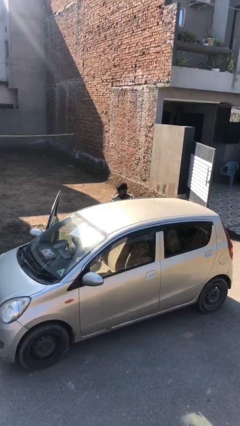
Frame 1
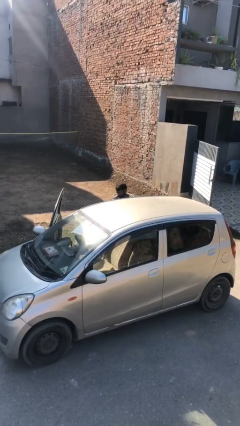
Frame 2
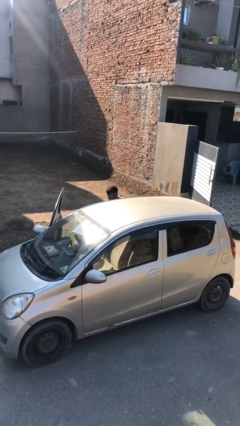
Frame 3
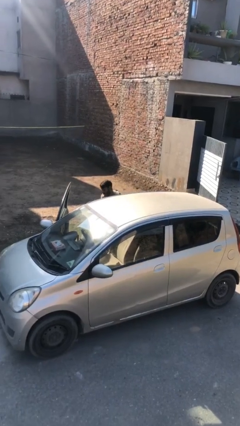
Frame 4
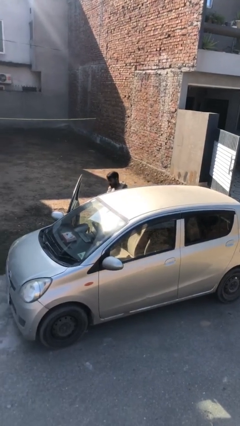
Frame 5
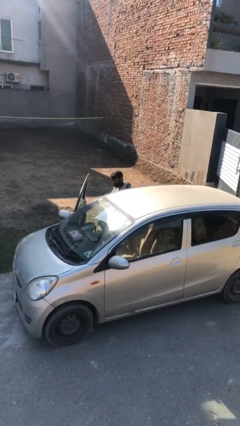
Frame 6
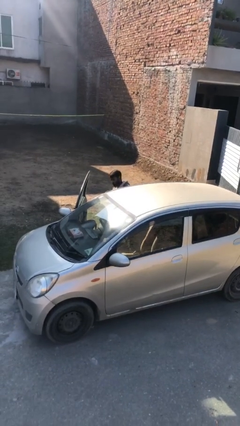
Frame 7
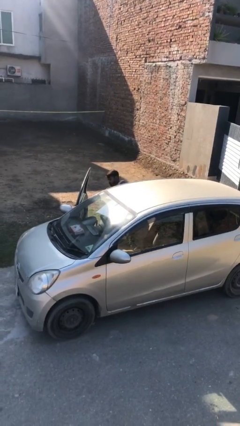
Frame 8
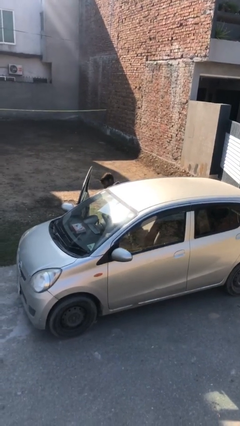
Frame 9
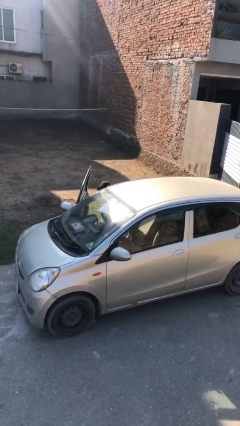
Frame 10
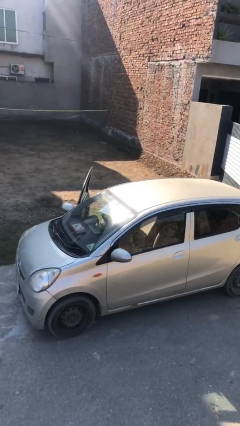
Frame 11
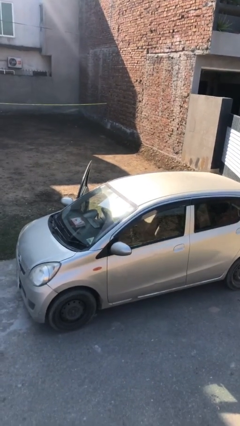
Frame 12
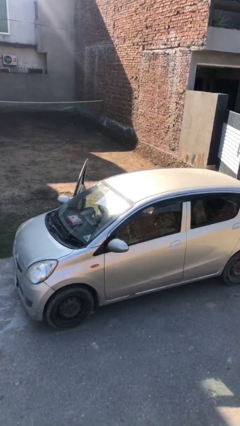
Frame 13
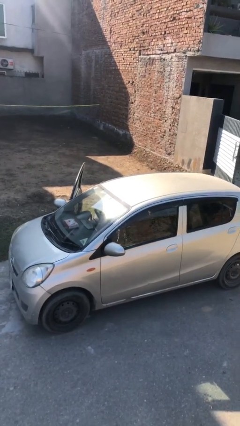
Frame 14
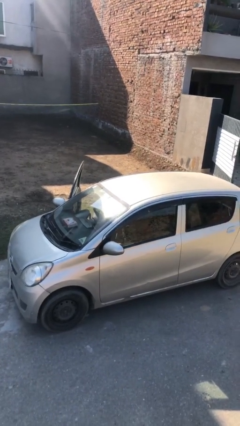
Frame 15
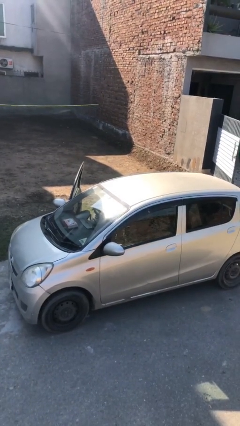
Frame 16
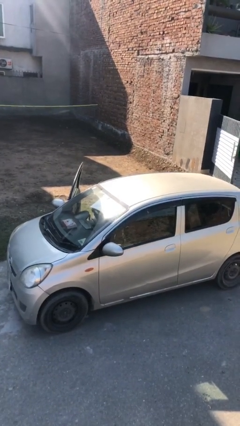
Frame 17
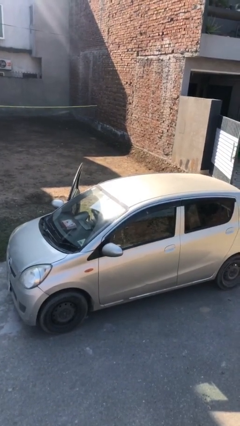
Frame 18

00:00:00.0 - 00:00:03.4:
person enters car

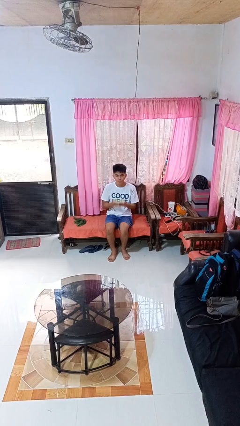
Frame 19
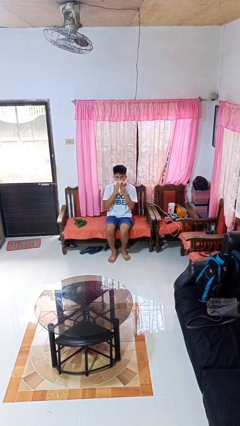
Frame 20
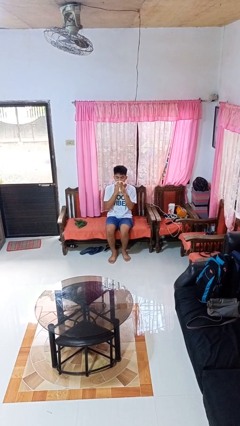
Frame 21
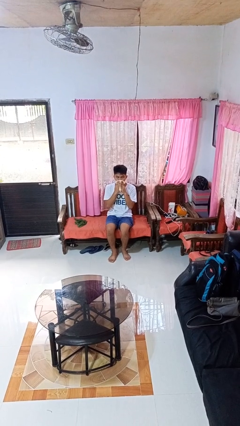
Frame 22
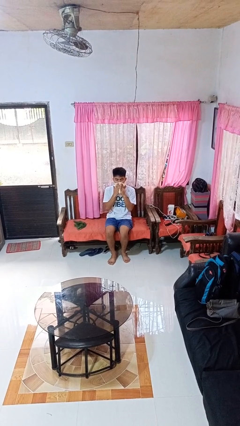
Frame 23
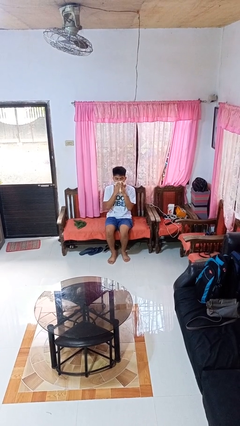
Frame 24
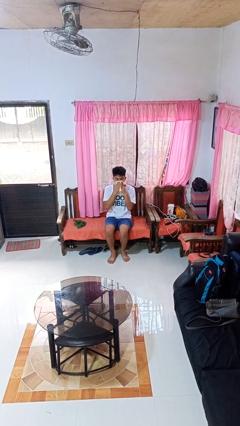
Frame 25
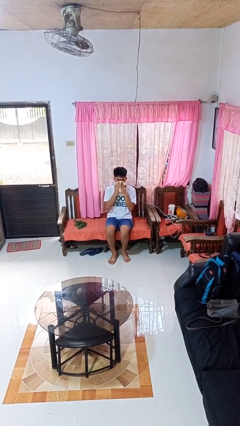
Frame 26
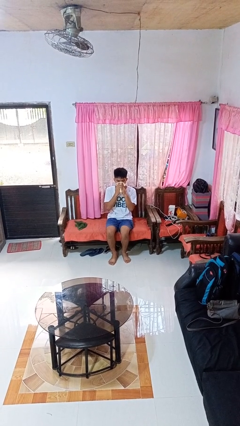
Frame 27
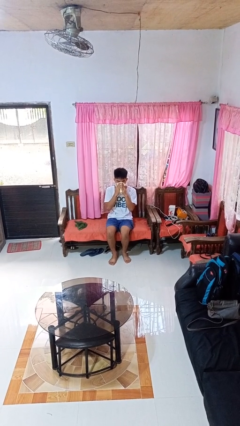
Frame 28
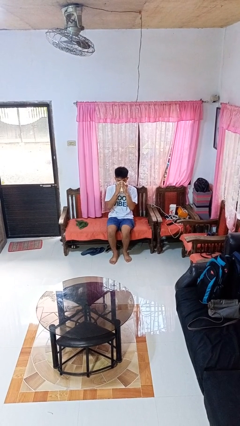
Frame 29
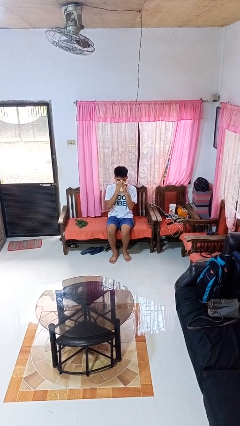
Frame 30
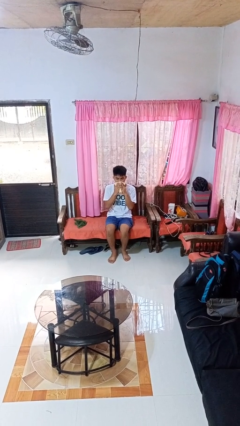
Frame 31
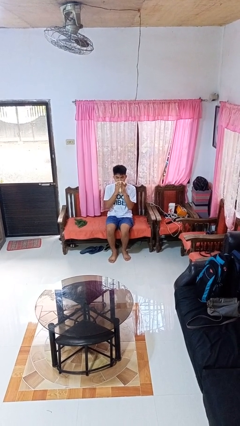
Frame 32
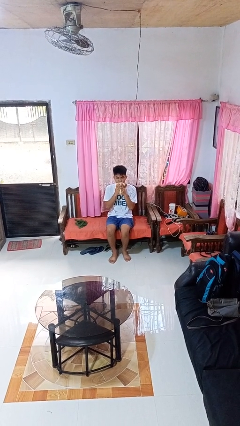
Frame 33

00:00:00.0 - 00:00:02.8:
person wipes mouth with napkin

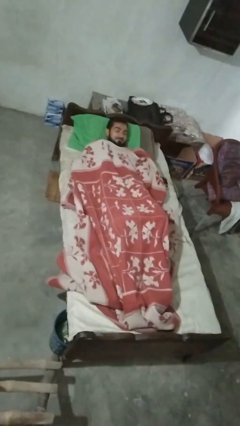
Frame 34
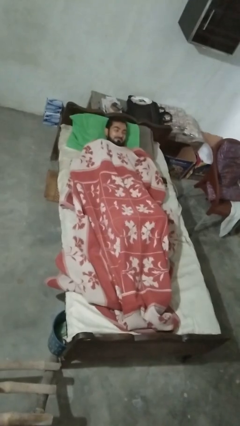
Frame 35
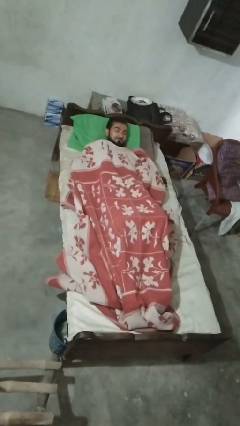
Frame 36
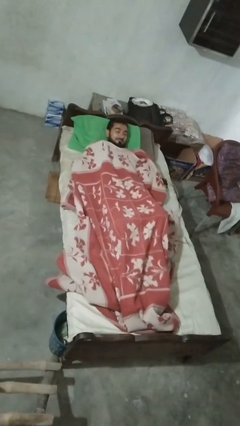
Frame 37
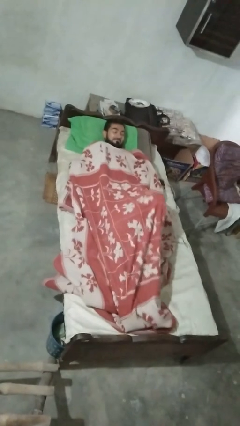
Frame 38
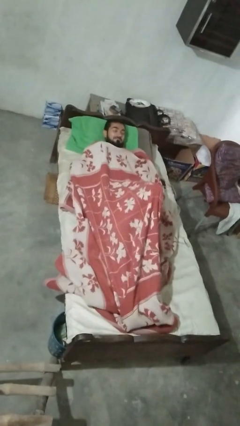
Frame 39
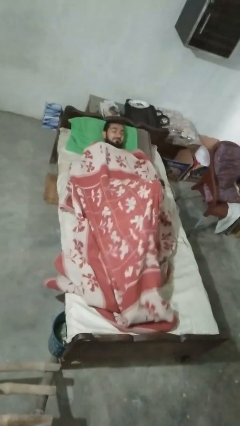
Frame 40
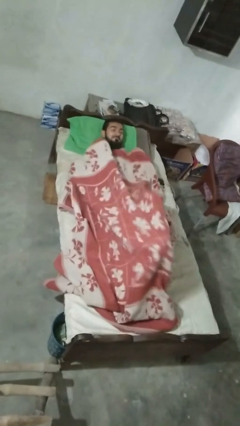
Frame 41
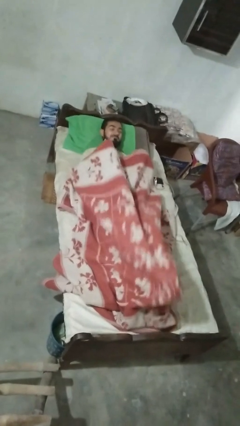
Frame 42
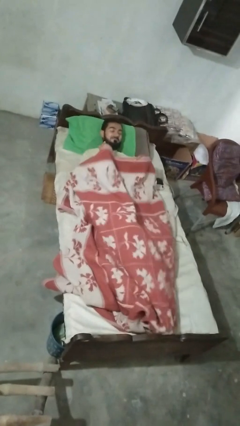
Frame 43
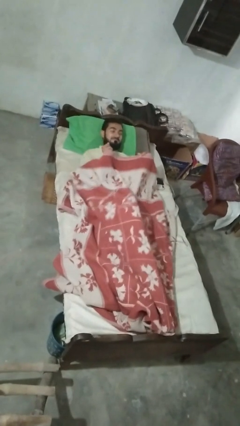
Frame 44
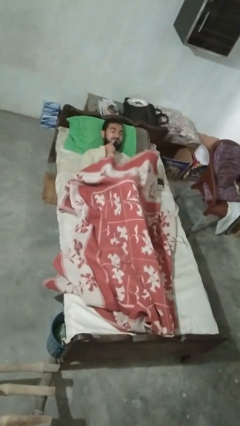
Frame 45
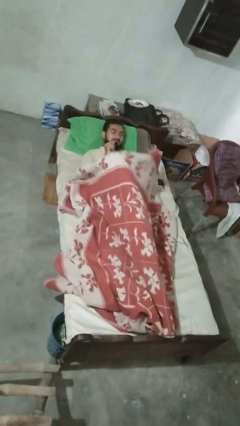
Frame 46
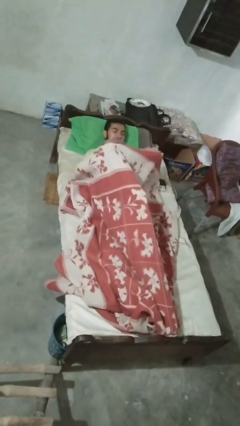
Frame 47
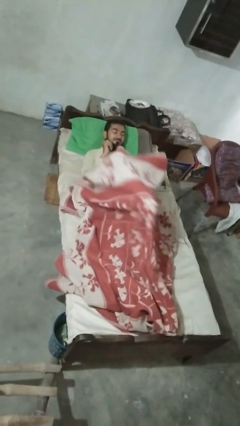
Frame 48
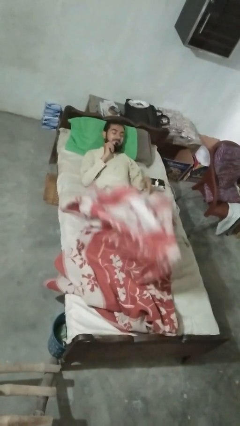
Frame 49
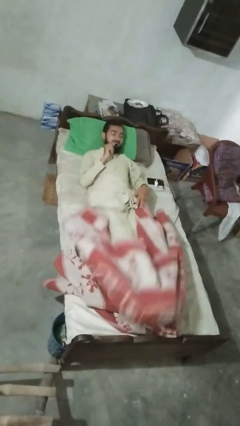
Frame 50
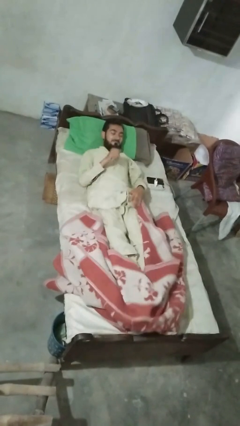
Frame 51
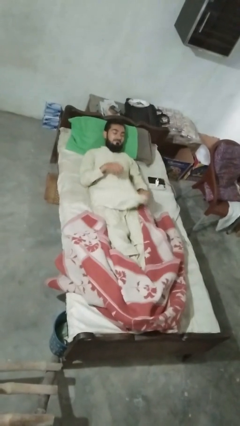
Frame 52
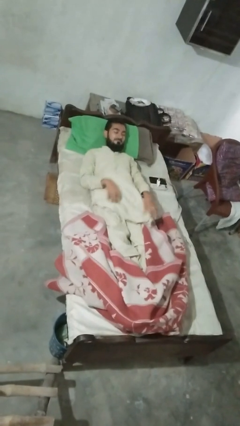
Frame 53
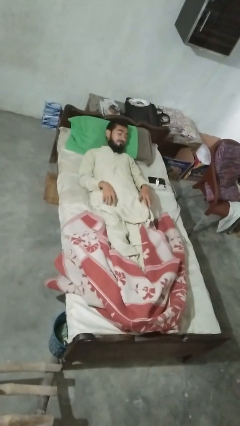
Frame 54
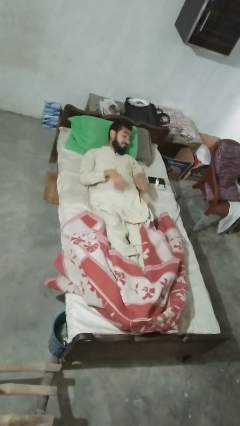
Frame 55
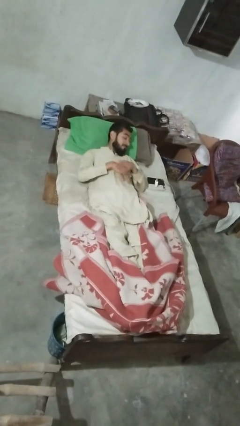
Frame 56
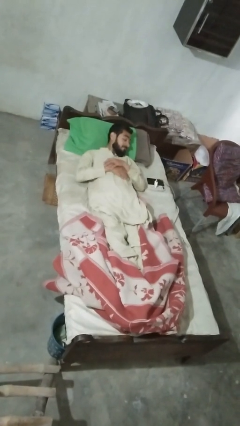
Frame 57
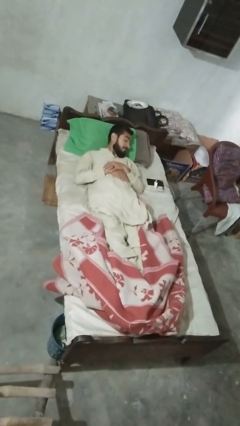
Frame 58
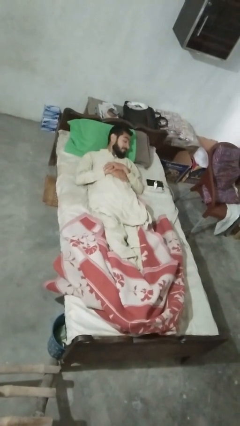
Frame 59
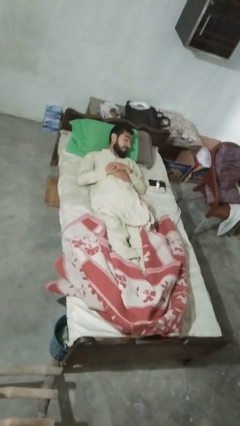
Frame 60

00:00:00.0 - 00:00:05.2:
person uncovers with bedsheets

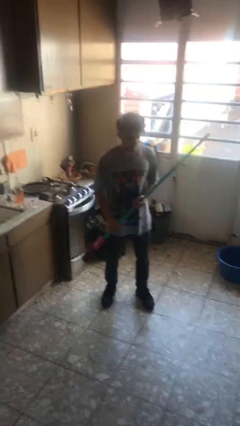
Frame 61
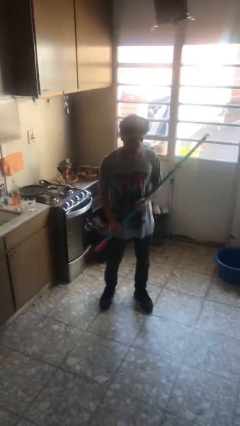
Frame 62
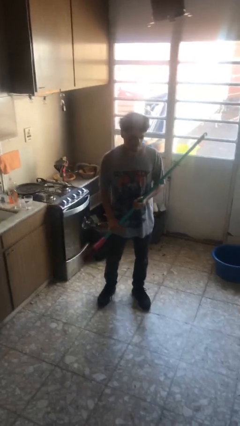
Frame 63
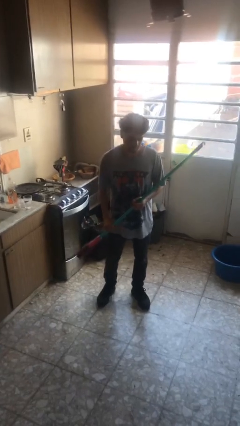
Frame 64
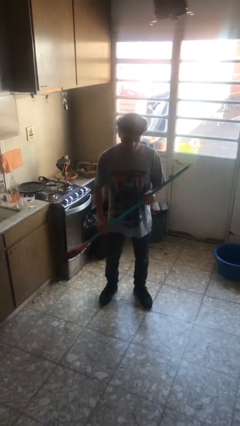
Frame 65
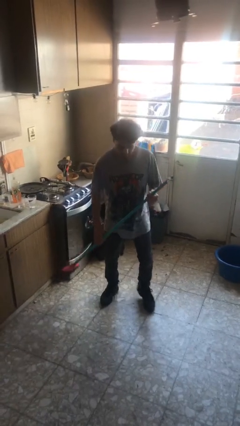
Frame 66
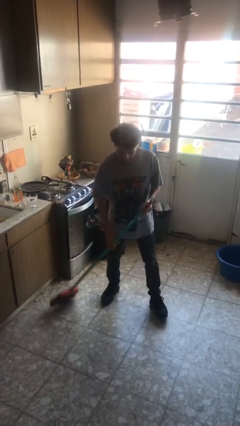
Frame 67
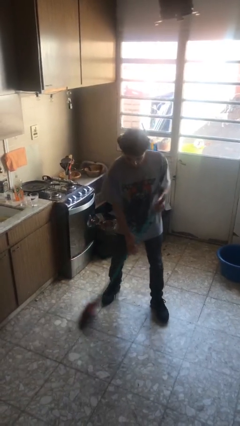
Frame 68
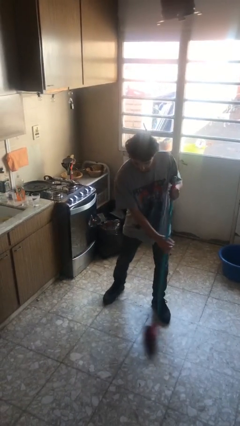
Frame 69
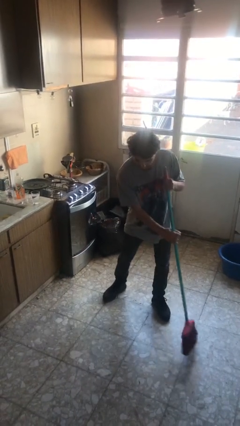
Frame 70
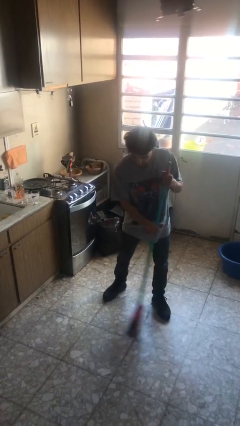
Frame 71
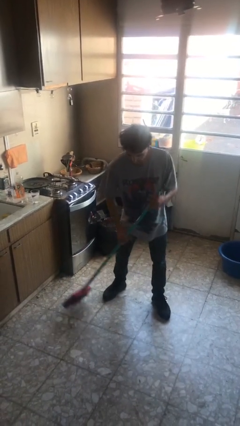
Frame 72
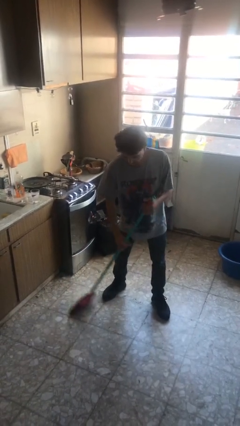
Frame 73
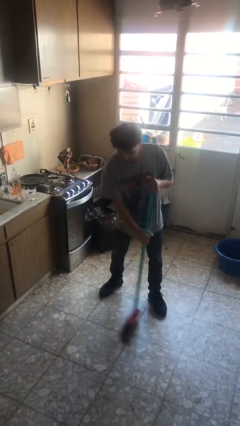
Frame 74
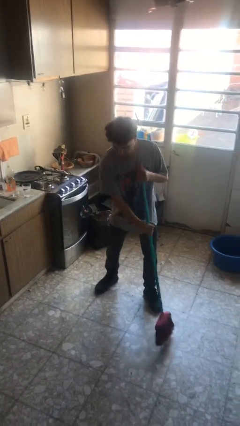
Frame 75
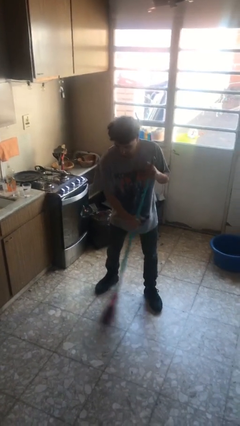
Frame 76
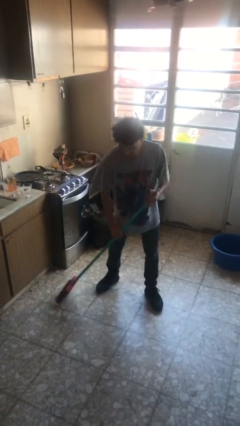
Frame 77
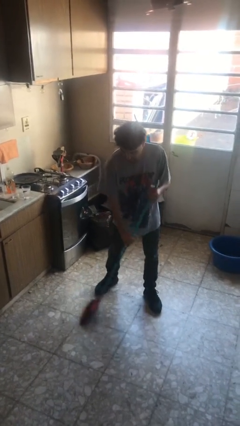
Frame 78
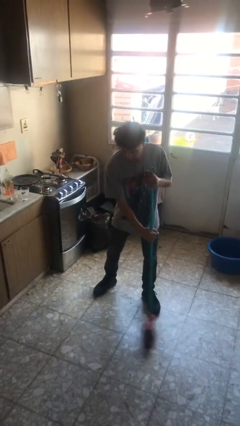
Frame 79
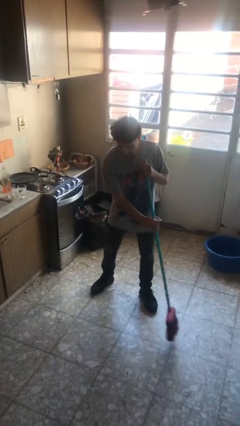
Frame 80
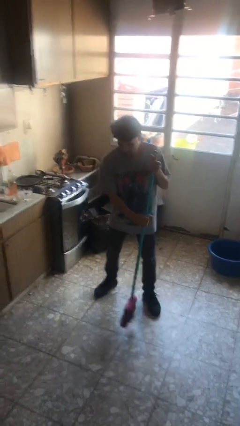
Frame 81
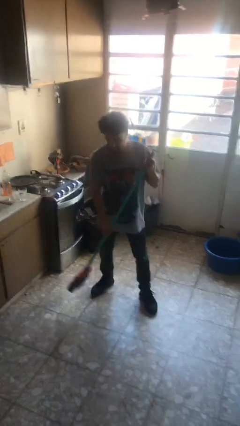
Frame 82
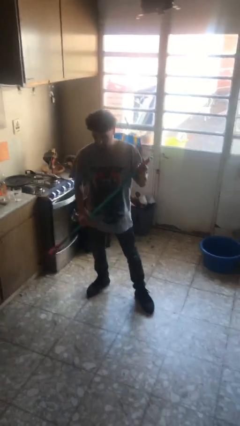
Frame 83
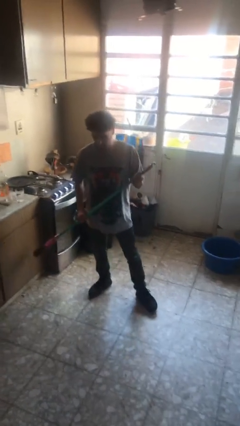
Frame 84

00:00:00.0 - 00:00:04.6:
person sweeps floor

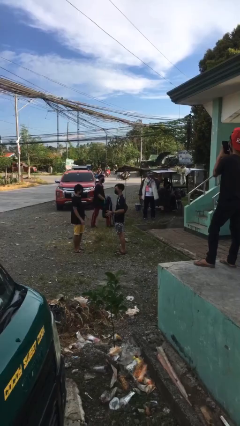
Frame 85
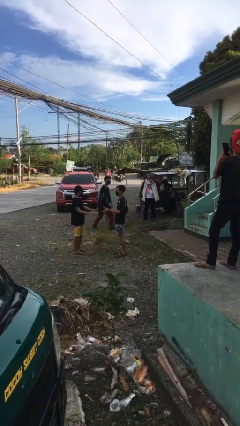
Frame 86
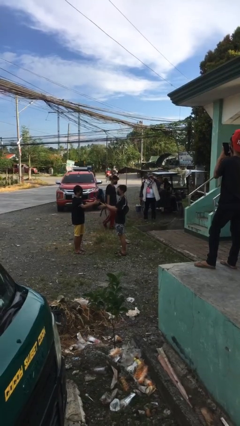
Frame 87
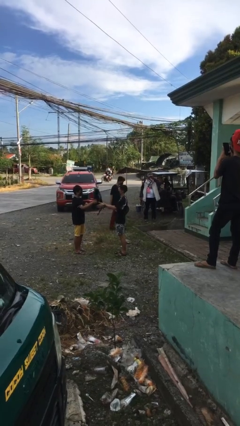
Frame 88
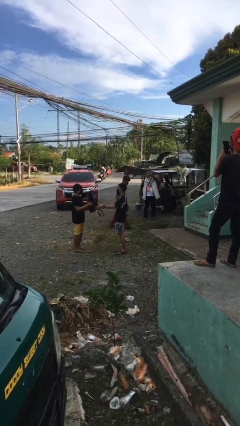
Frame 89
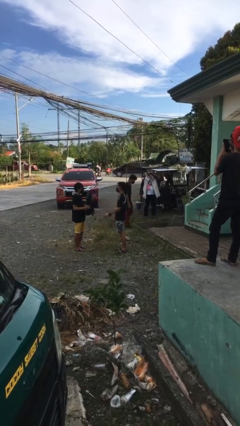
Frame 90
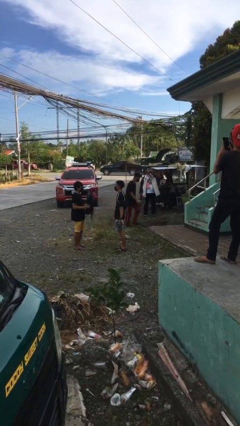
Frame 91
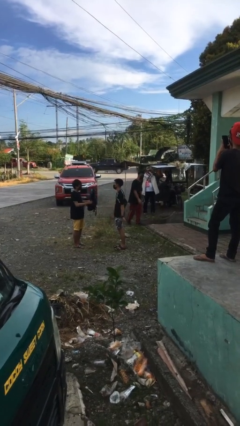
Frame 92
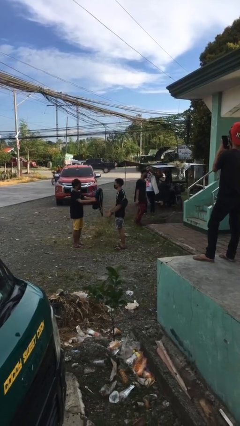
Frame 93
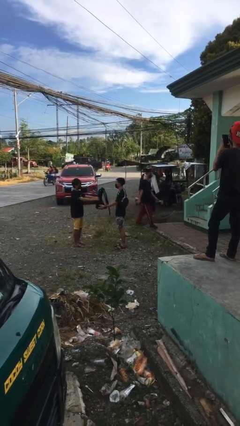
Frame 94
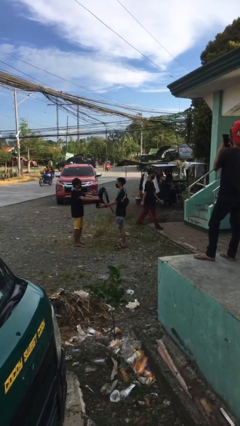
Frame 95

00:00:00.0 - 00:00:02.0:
person transfers object to person
